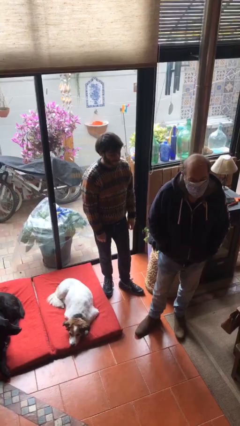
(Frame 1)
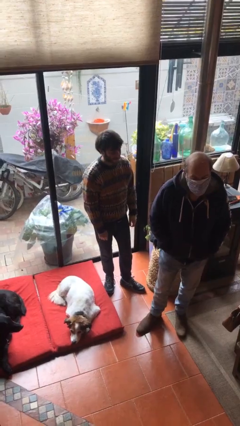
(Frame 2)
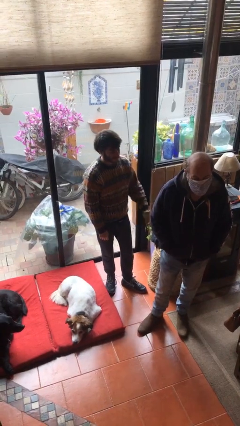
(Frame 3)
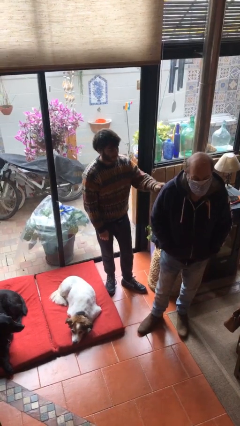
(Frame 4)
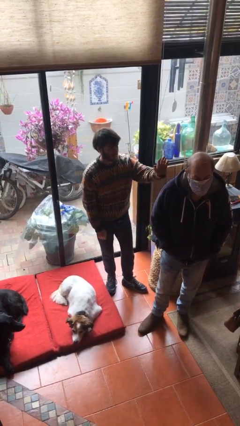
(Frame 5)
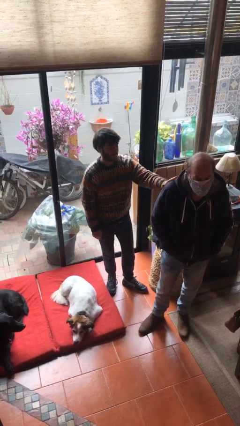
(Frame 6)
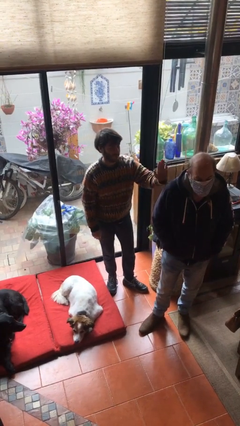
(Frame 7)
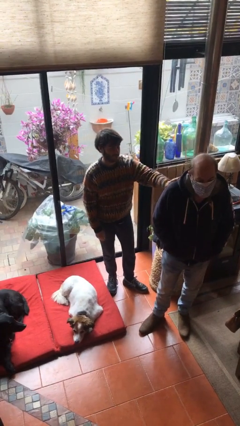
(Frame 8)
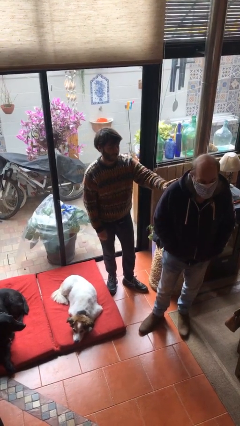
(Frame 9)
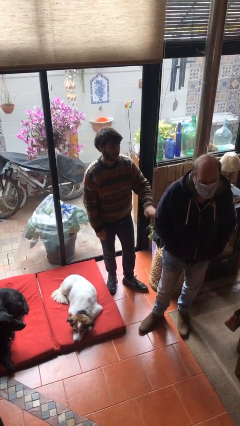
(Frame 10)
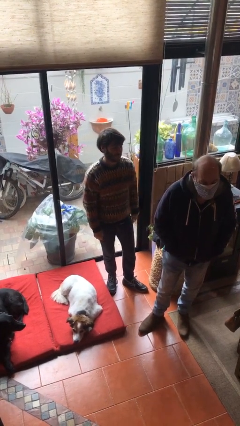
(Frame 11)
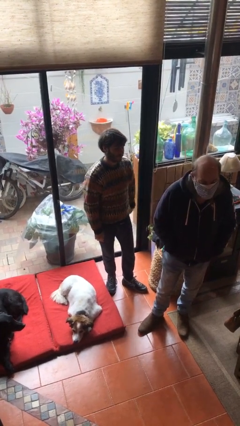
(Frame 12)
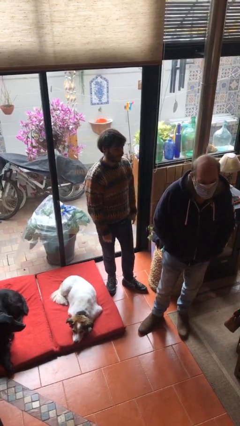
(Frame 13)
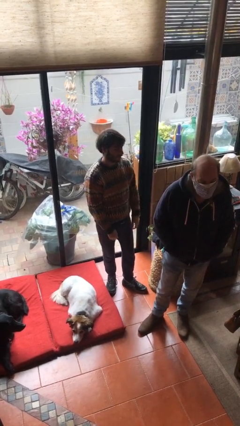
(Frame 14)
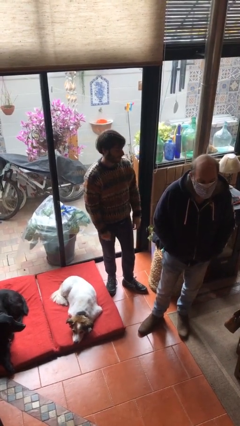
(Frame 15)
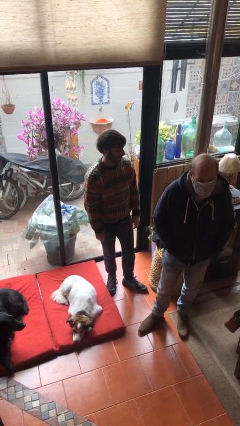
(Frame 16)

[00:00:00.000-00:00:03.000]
person touches back of person

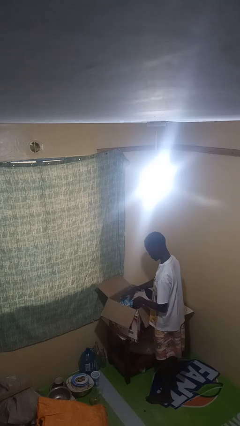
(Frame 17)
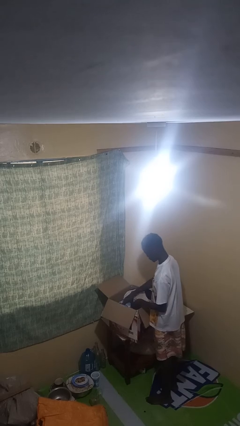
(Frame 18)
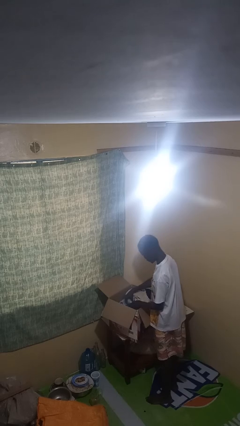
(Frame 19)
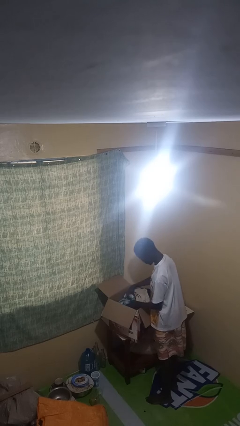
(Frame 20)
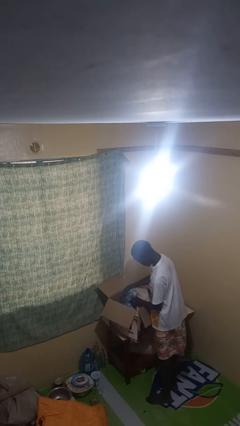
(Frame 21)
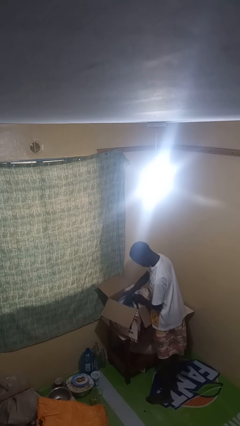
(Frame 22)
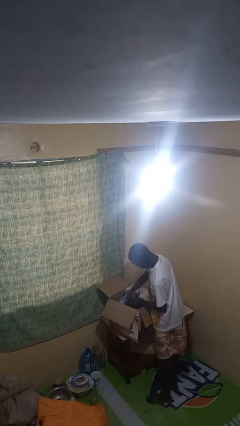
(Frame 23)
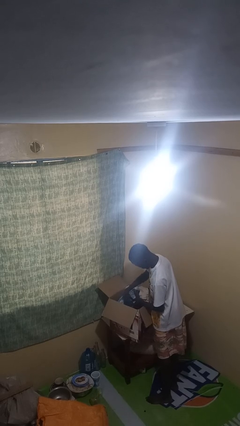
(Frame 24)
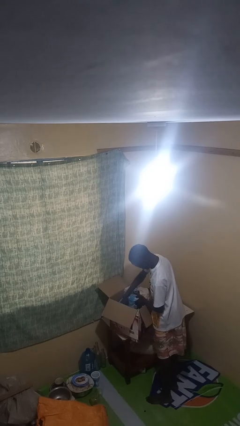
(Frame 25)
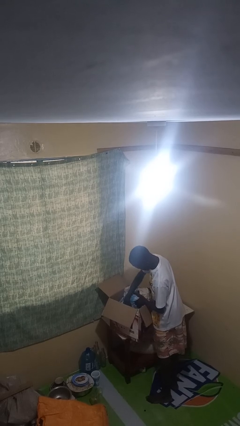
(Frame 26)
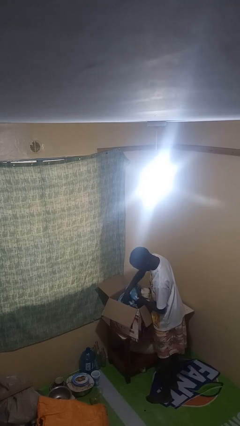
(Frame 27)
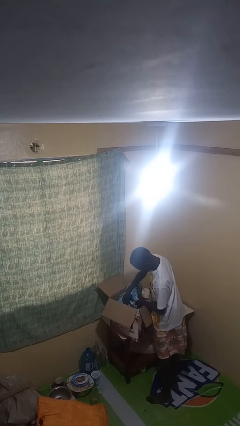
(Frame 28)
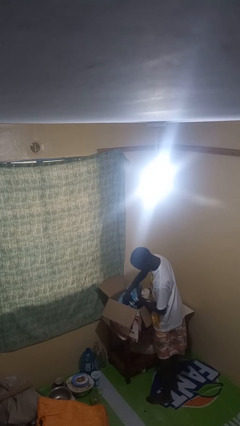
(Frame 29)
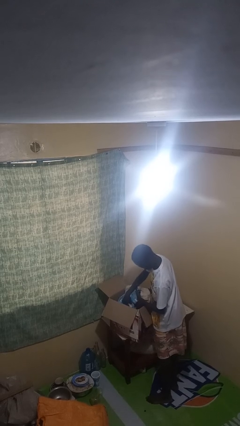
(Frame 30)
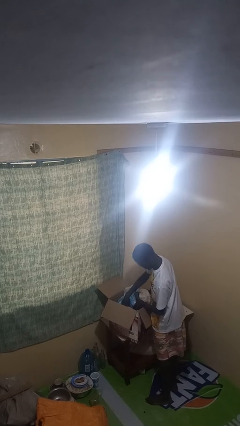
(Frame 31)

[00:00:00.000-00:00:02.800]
person searches in box

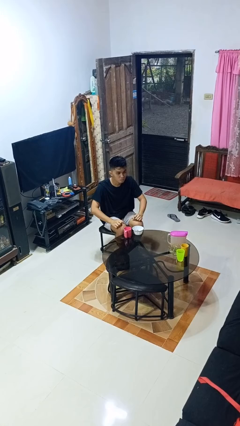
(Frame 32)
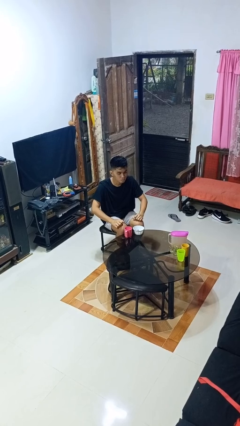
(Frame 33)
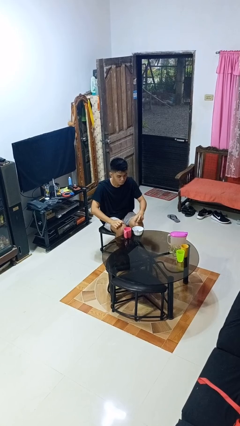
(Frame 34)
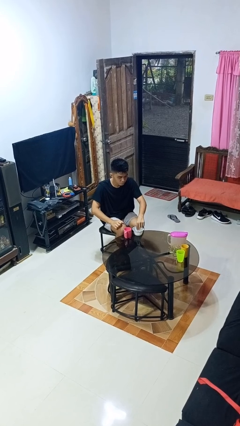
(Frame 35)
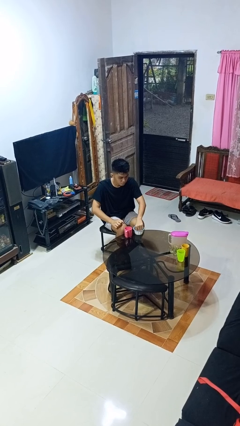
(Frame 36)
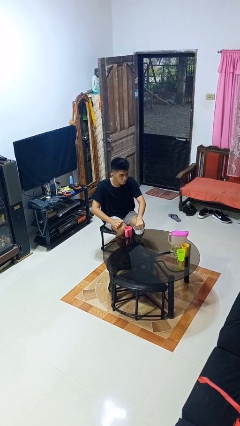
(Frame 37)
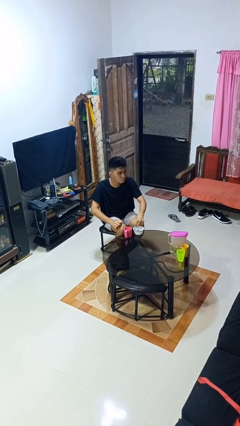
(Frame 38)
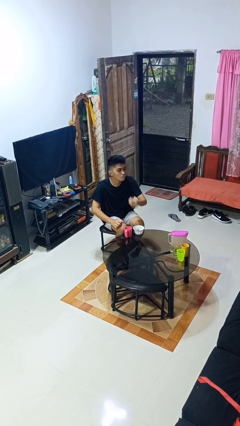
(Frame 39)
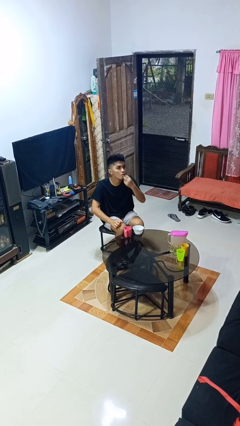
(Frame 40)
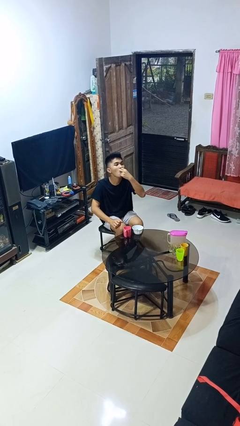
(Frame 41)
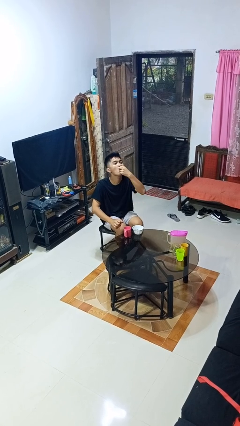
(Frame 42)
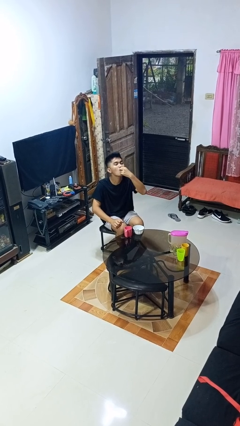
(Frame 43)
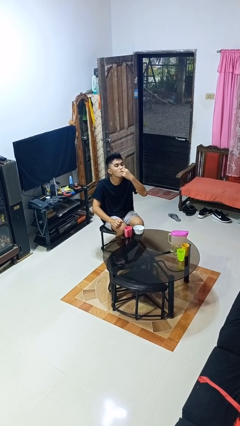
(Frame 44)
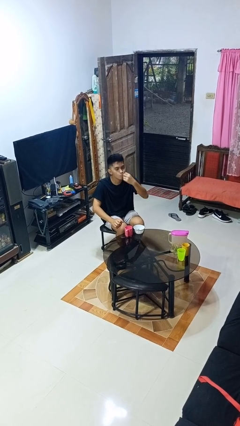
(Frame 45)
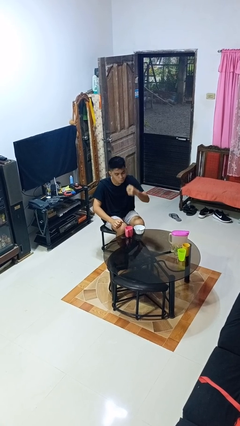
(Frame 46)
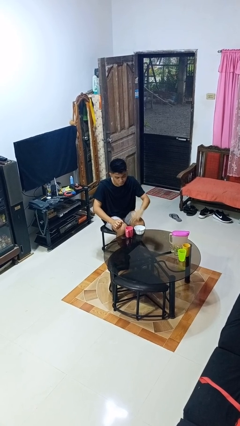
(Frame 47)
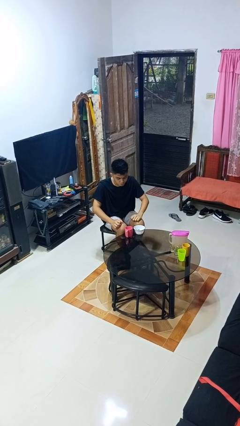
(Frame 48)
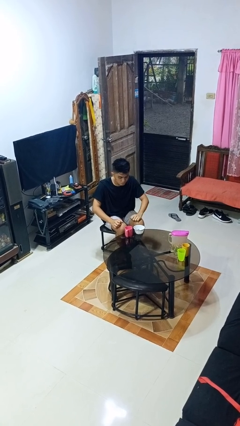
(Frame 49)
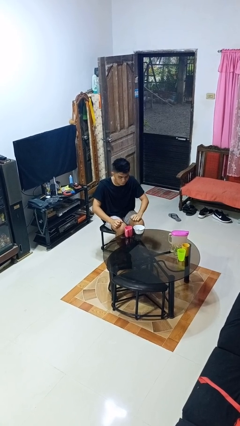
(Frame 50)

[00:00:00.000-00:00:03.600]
person takes medicine pills

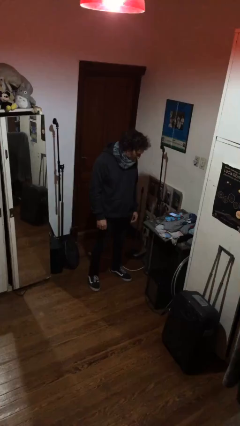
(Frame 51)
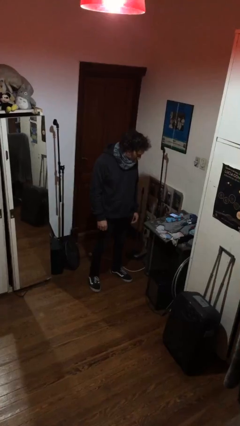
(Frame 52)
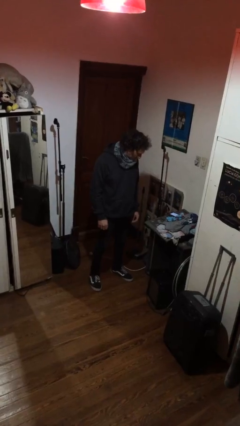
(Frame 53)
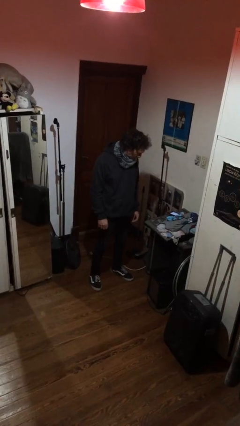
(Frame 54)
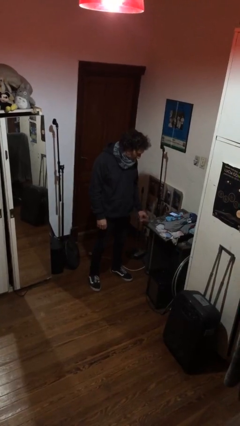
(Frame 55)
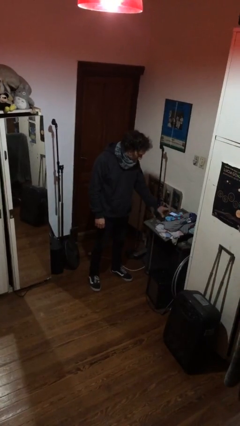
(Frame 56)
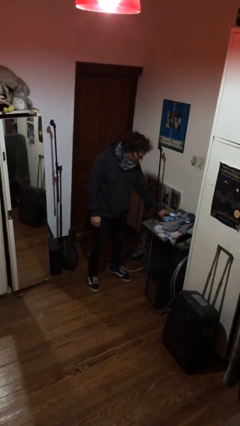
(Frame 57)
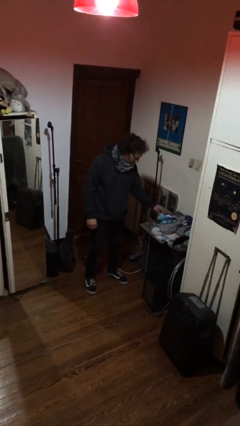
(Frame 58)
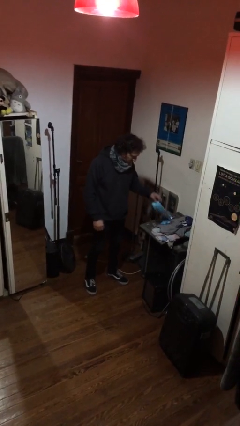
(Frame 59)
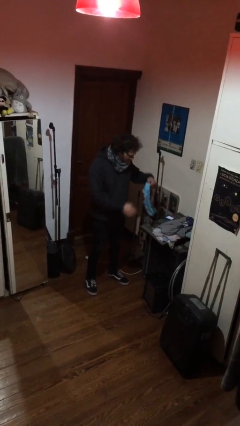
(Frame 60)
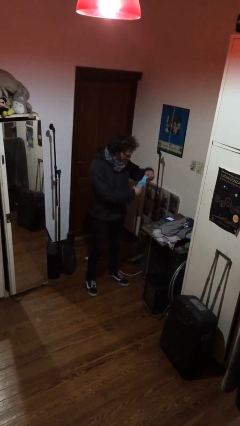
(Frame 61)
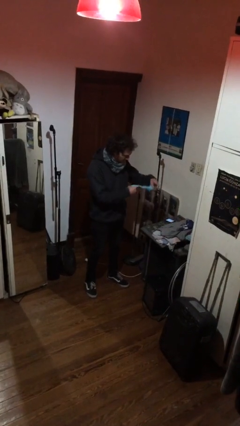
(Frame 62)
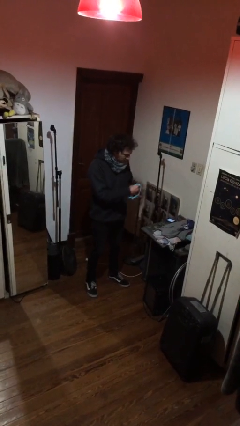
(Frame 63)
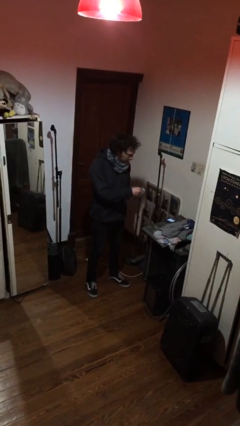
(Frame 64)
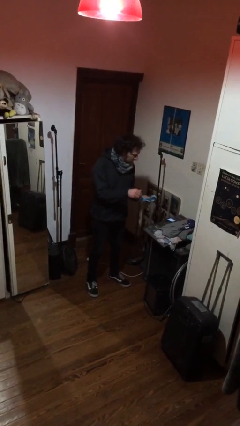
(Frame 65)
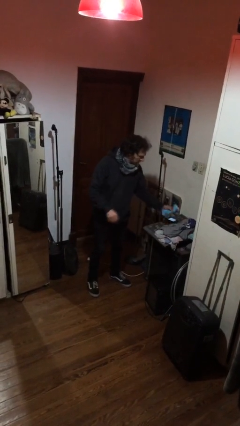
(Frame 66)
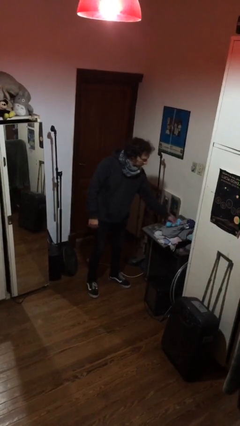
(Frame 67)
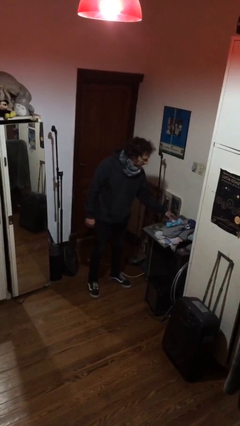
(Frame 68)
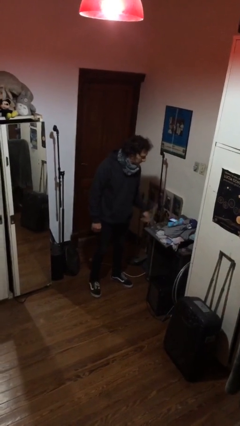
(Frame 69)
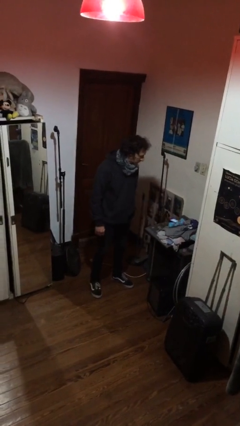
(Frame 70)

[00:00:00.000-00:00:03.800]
person folds socks

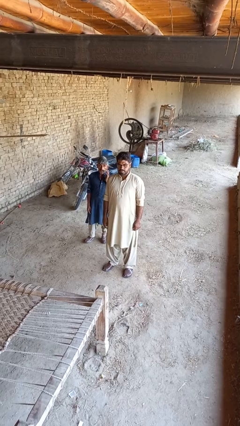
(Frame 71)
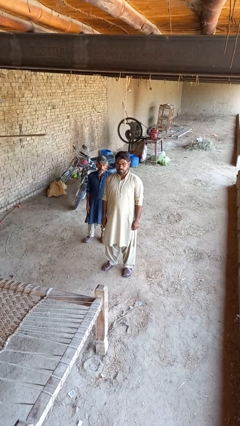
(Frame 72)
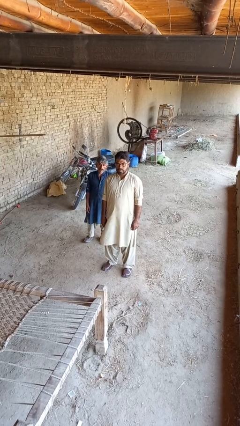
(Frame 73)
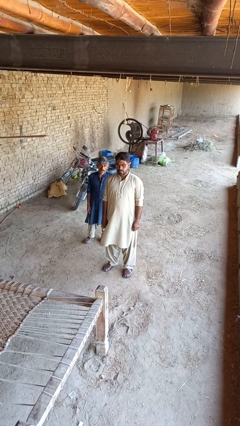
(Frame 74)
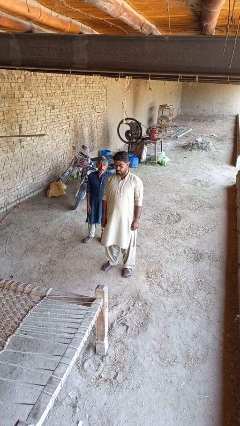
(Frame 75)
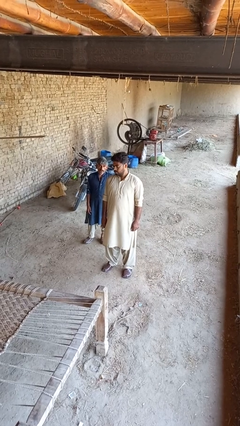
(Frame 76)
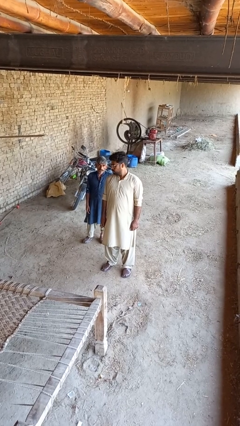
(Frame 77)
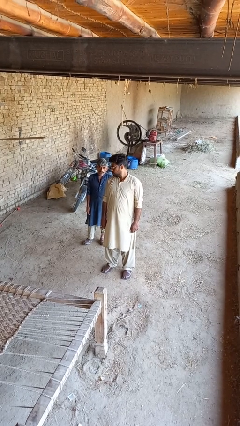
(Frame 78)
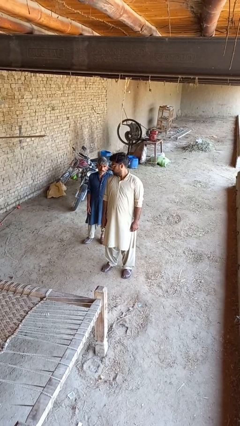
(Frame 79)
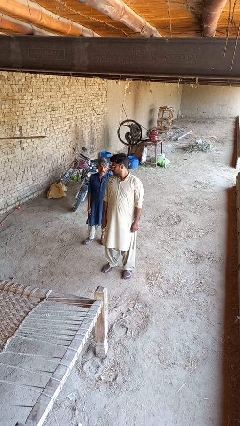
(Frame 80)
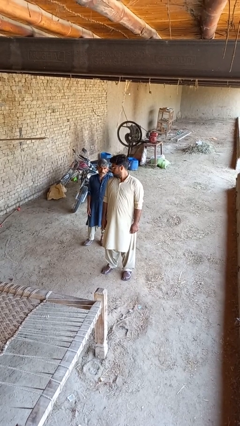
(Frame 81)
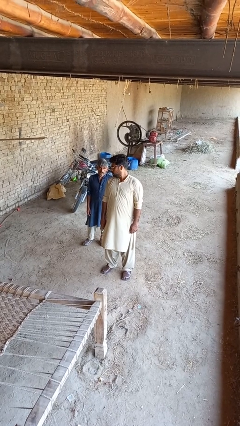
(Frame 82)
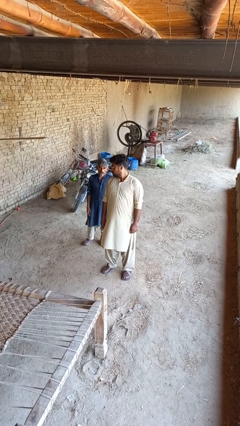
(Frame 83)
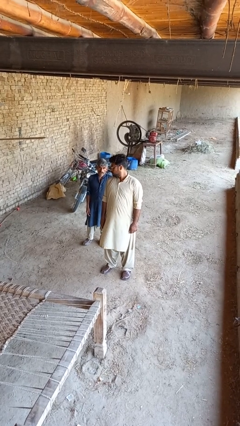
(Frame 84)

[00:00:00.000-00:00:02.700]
person looks over shoulder

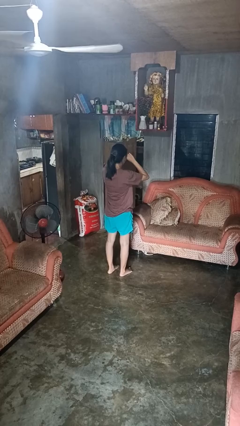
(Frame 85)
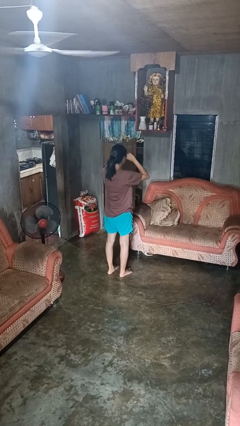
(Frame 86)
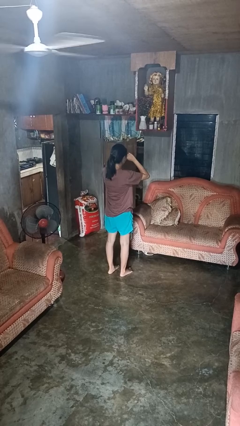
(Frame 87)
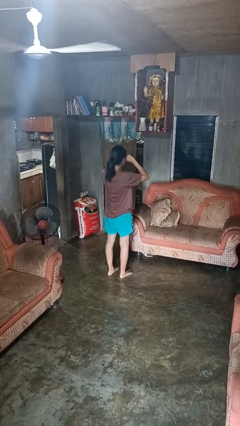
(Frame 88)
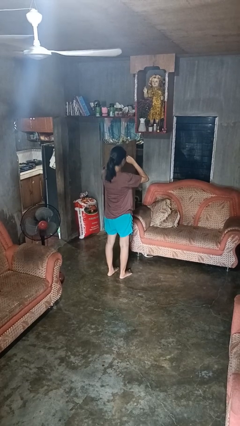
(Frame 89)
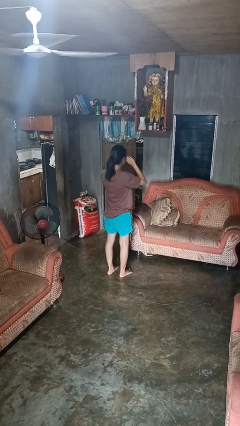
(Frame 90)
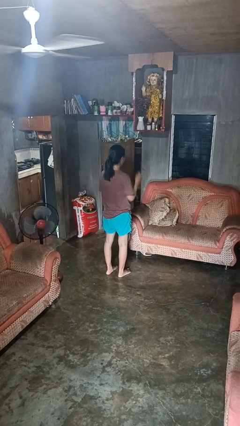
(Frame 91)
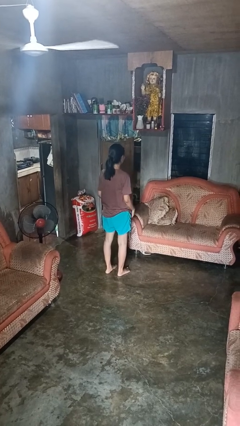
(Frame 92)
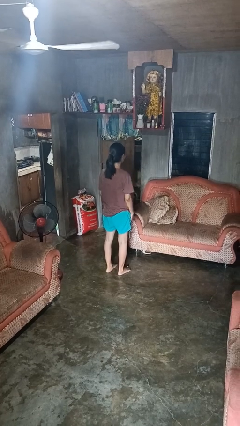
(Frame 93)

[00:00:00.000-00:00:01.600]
person rubs eyes
